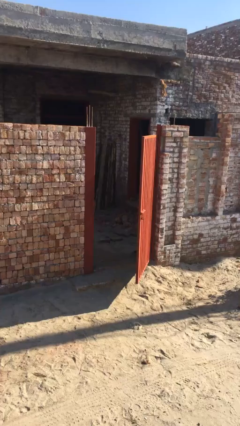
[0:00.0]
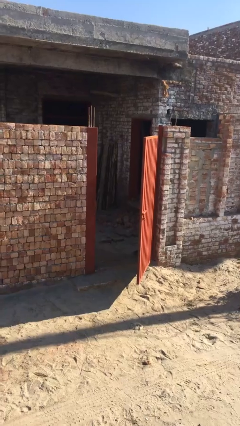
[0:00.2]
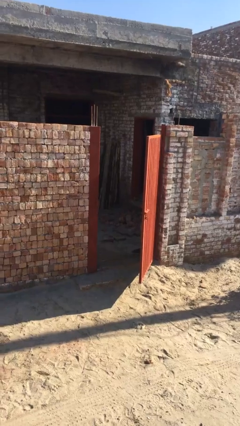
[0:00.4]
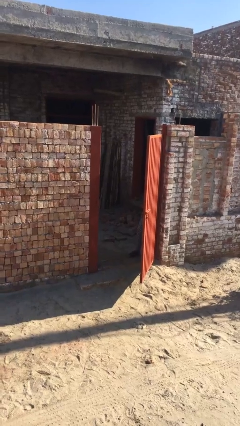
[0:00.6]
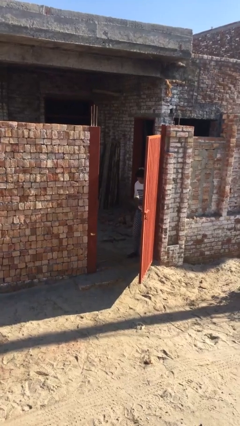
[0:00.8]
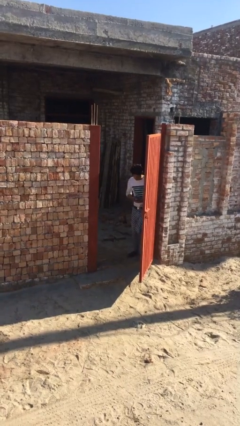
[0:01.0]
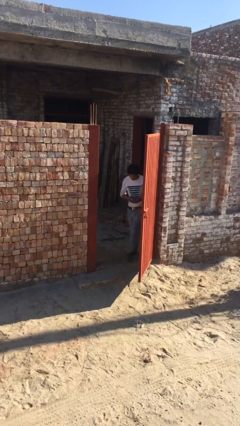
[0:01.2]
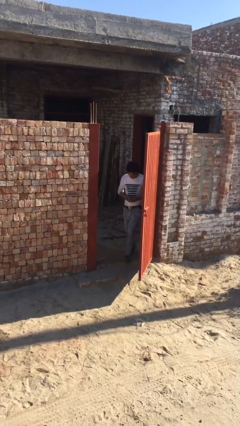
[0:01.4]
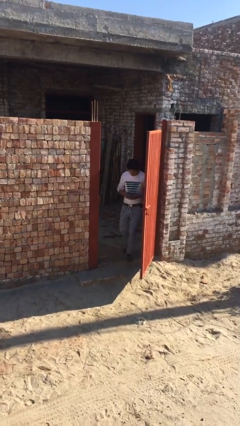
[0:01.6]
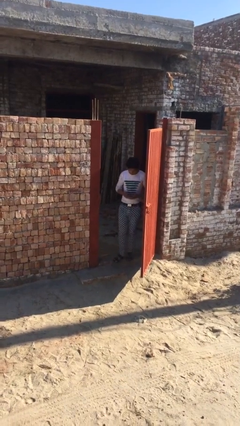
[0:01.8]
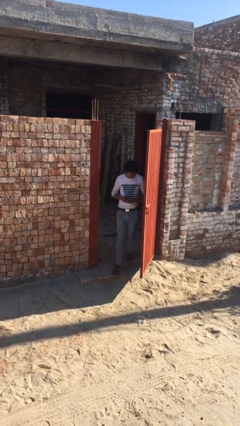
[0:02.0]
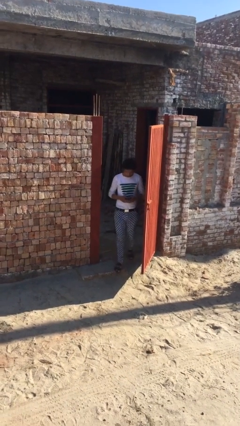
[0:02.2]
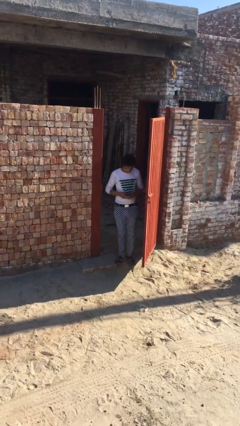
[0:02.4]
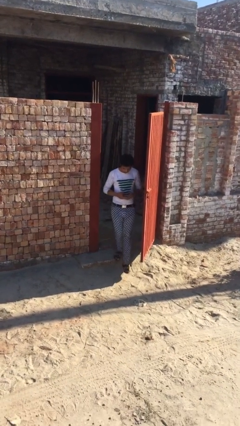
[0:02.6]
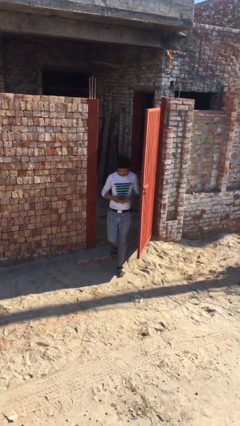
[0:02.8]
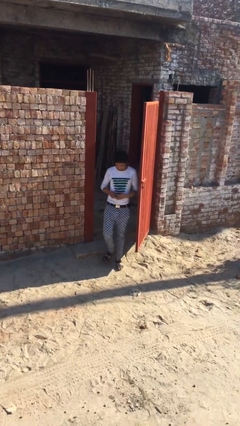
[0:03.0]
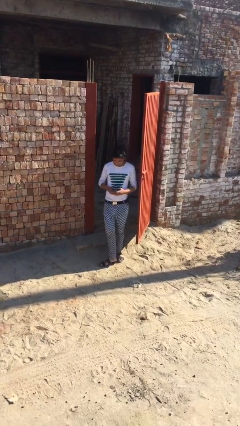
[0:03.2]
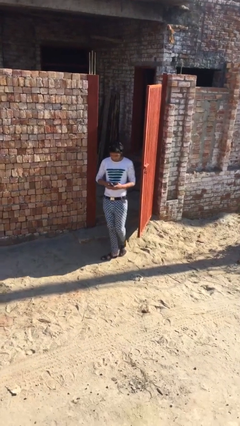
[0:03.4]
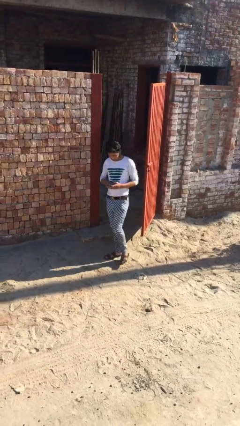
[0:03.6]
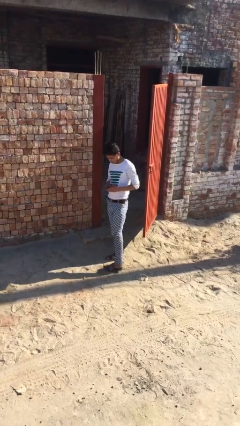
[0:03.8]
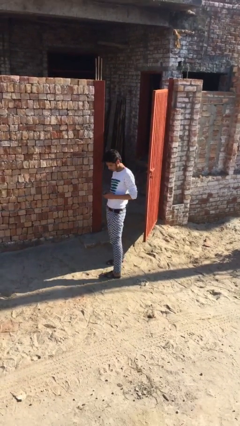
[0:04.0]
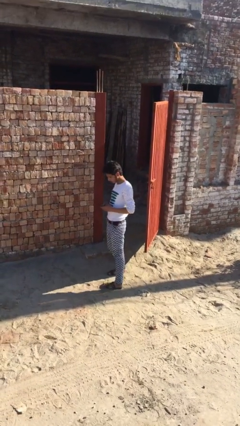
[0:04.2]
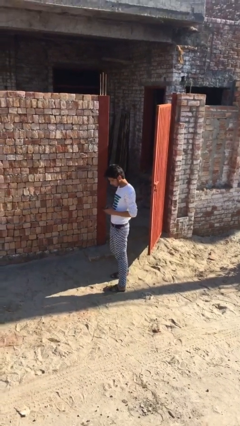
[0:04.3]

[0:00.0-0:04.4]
person enters scene through structure

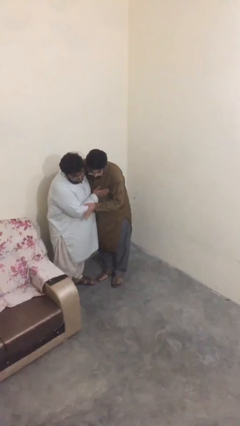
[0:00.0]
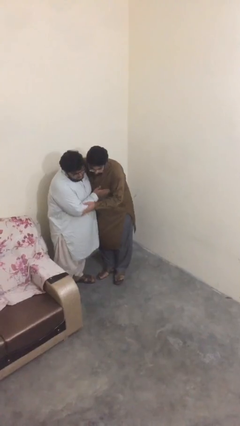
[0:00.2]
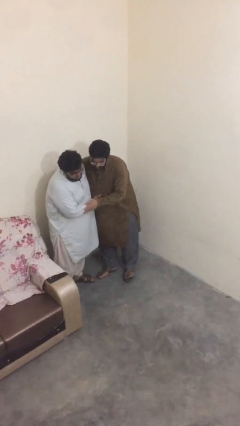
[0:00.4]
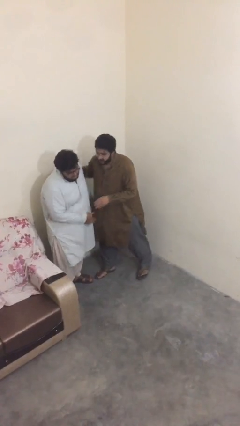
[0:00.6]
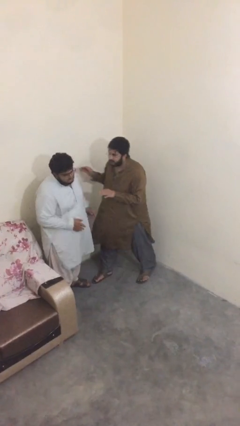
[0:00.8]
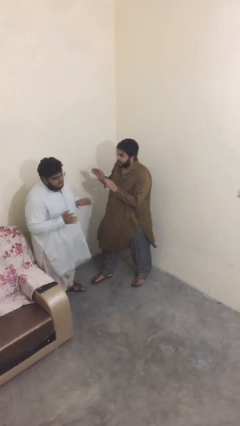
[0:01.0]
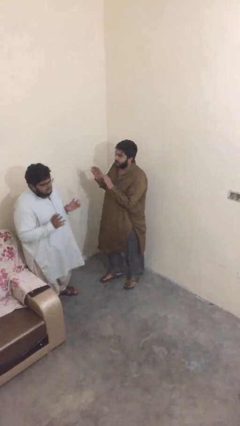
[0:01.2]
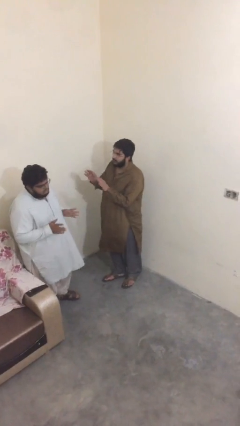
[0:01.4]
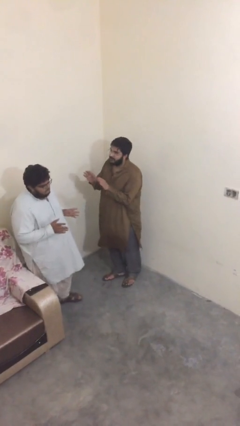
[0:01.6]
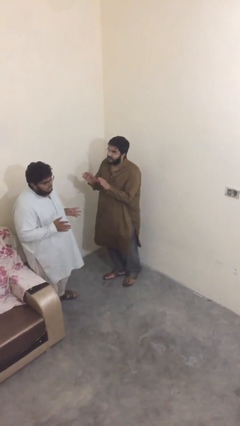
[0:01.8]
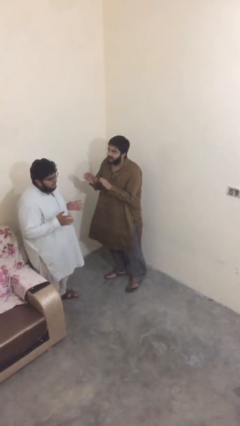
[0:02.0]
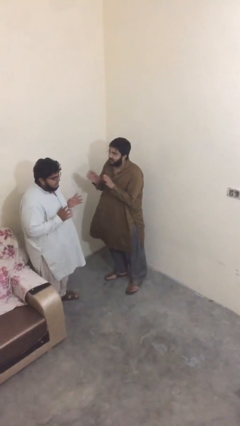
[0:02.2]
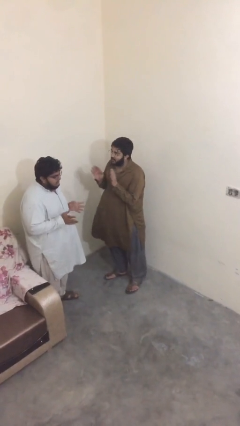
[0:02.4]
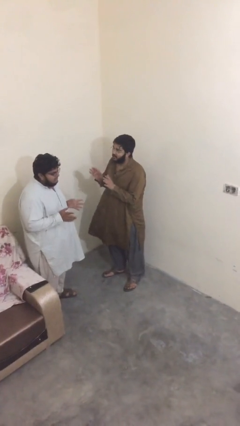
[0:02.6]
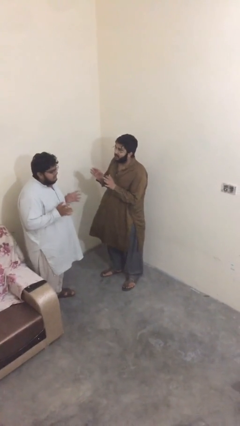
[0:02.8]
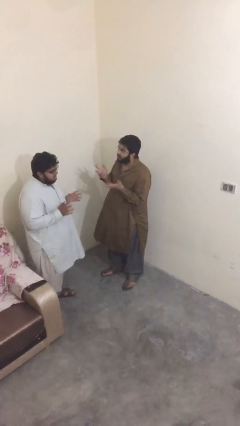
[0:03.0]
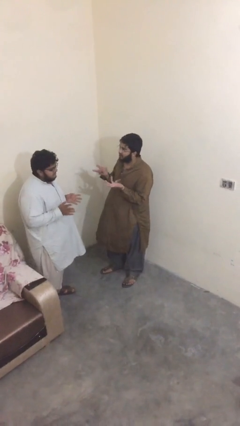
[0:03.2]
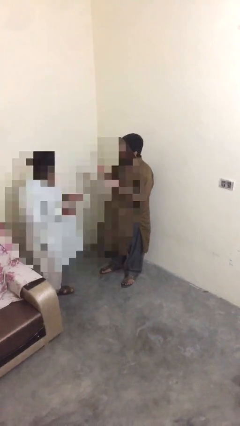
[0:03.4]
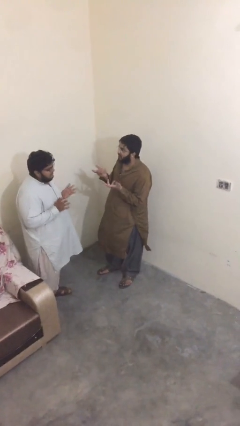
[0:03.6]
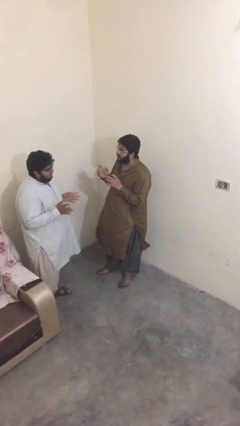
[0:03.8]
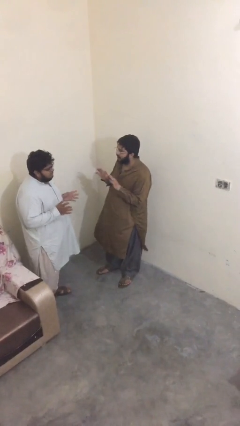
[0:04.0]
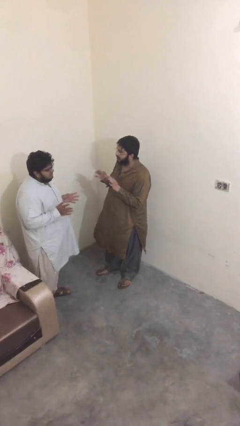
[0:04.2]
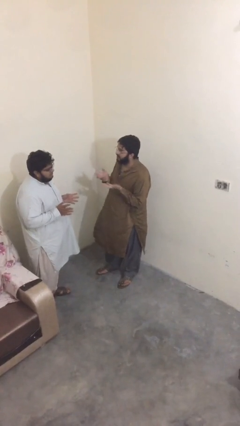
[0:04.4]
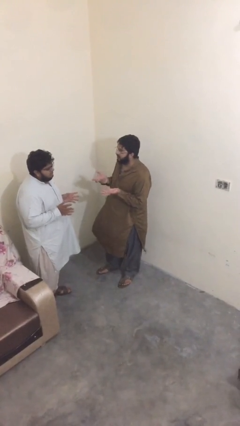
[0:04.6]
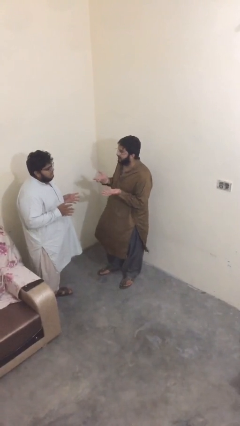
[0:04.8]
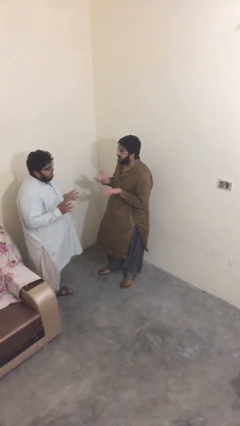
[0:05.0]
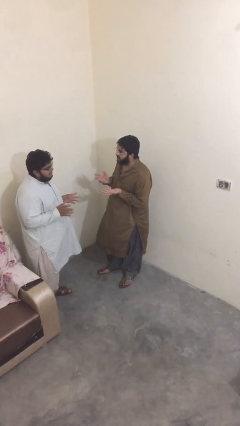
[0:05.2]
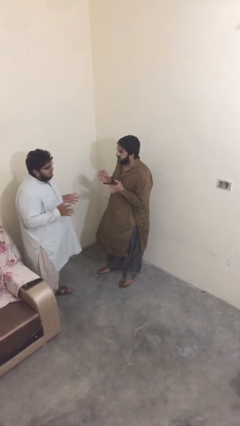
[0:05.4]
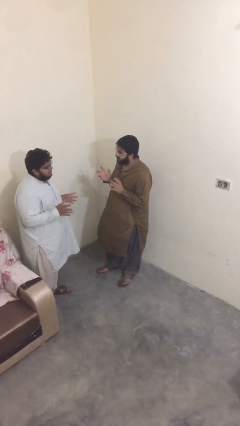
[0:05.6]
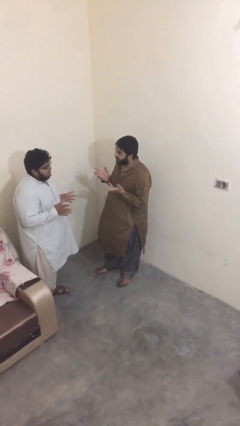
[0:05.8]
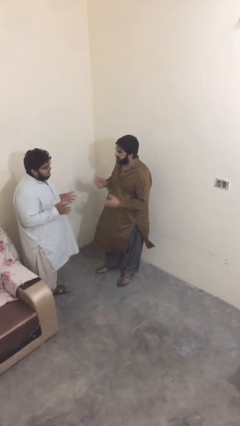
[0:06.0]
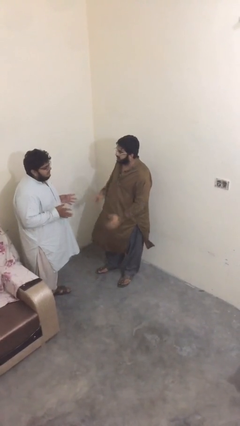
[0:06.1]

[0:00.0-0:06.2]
person talks to person

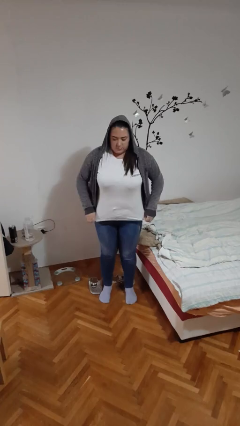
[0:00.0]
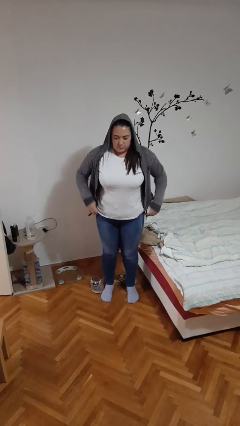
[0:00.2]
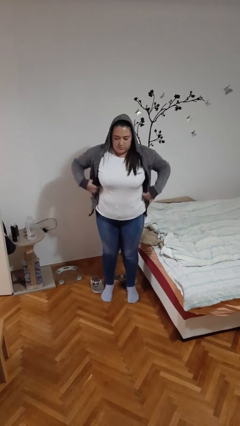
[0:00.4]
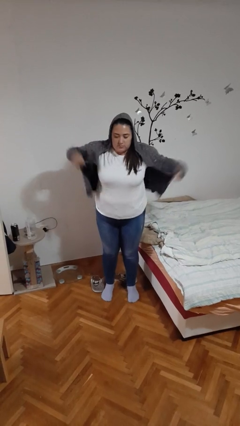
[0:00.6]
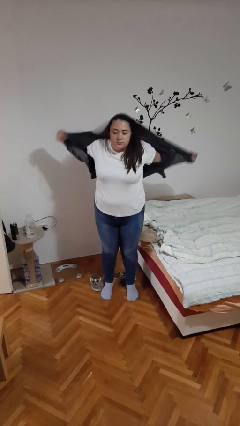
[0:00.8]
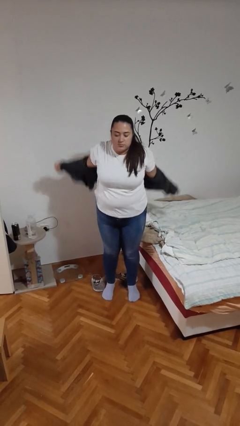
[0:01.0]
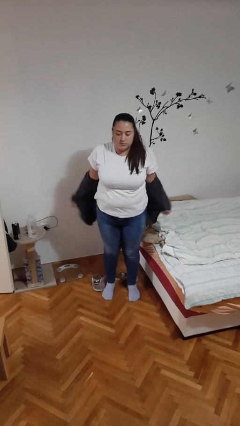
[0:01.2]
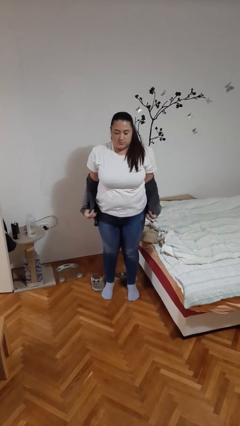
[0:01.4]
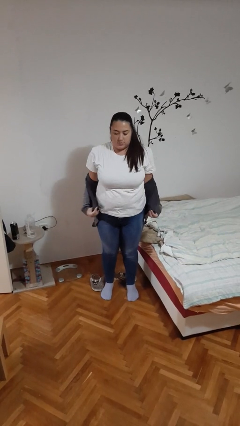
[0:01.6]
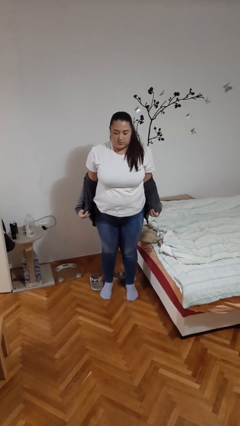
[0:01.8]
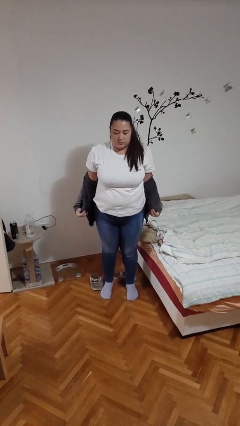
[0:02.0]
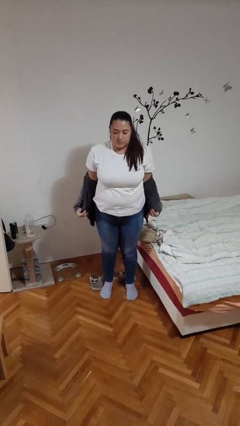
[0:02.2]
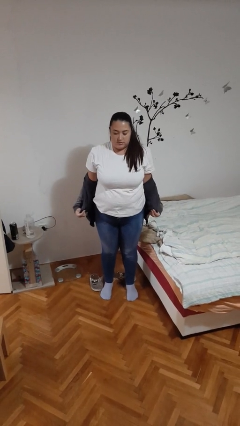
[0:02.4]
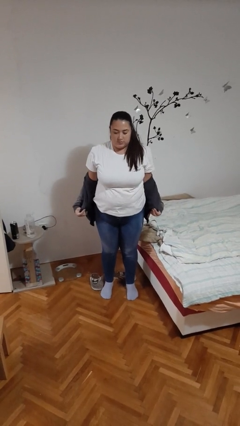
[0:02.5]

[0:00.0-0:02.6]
person takes off hoodie

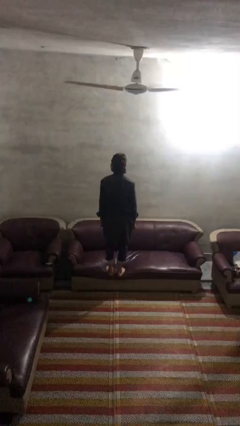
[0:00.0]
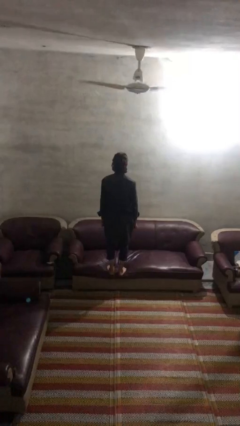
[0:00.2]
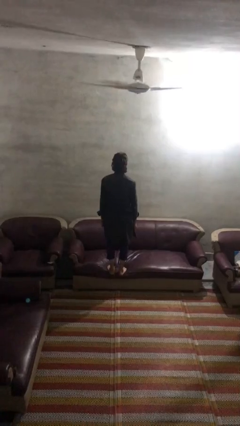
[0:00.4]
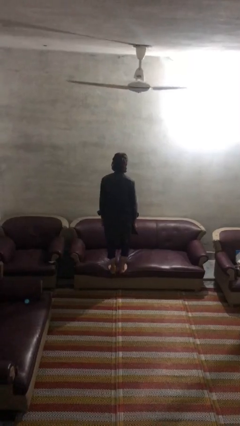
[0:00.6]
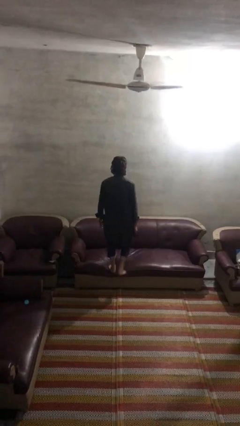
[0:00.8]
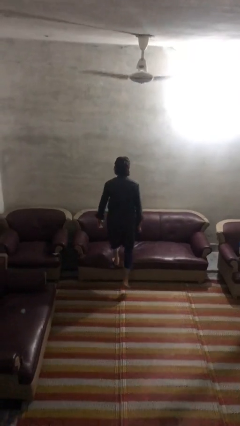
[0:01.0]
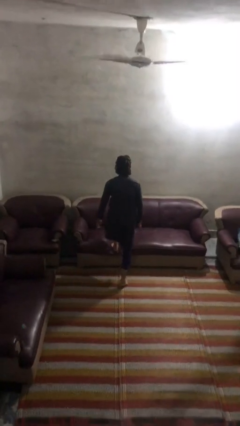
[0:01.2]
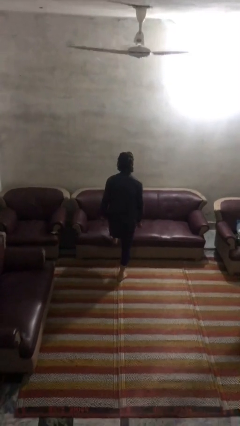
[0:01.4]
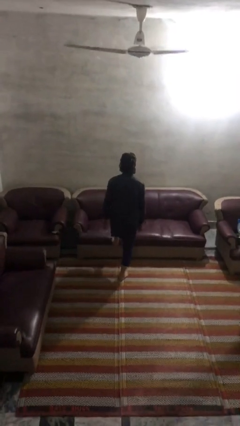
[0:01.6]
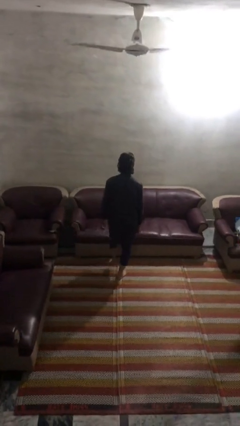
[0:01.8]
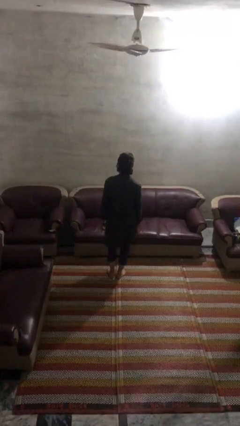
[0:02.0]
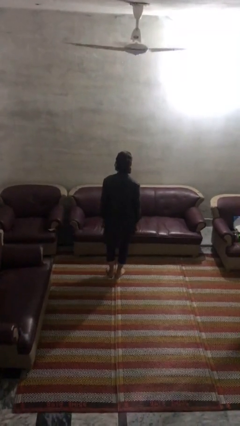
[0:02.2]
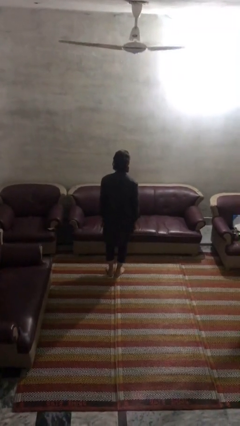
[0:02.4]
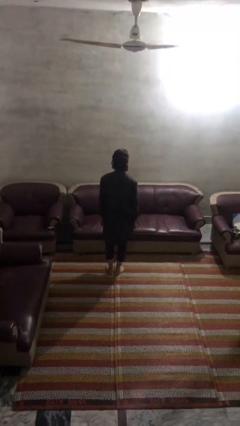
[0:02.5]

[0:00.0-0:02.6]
person climbs off couch

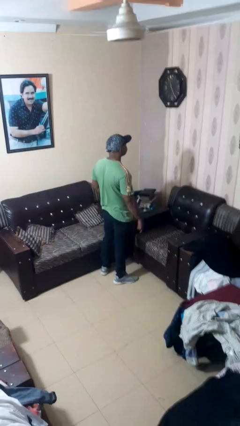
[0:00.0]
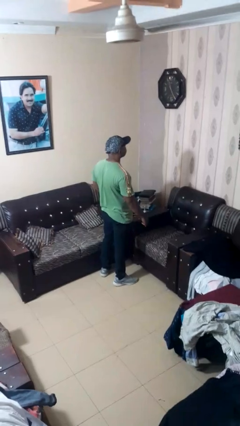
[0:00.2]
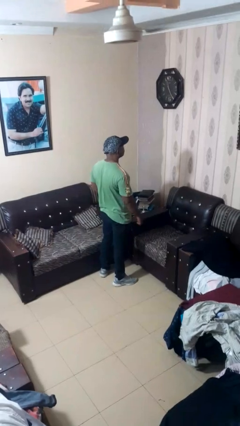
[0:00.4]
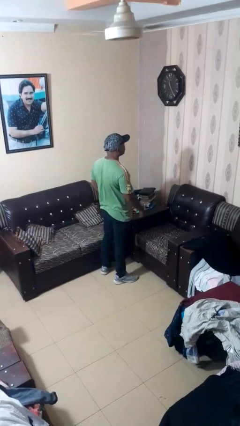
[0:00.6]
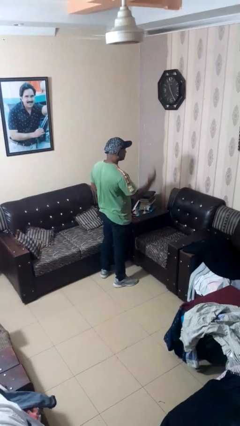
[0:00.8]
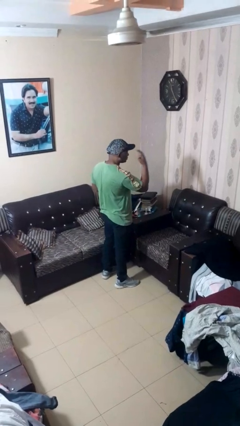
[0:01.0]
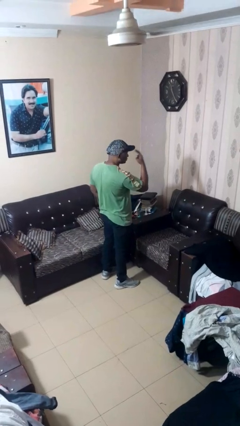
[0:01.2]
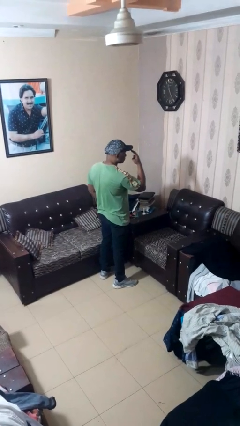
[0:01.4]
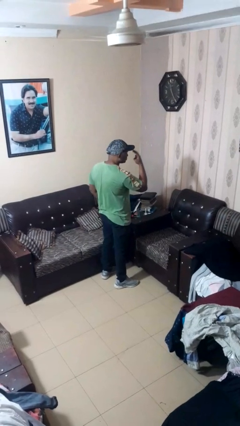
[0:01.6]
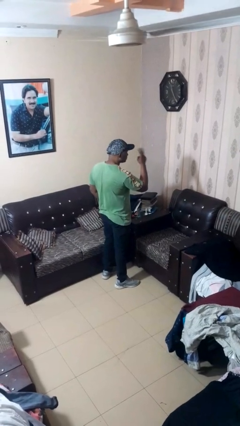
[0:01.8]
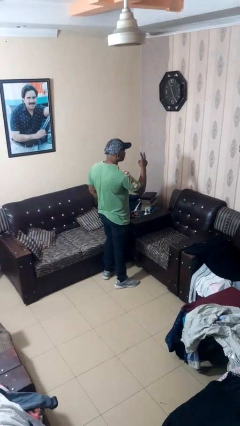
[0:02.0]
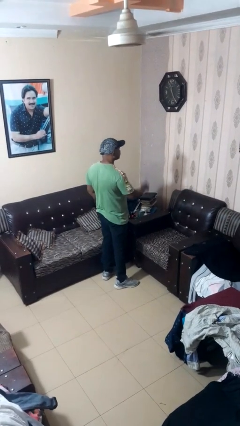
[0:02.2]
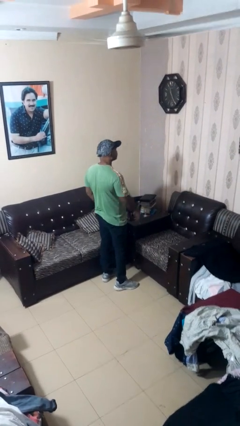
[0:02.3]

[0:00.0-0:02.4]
person gestures watch closely
